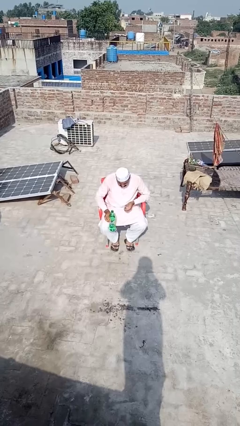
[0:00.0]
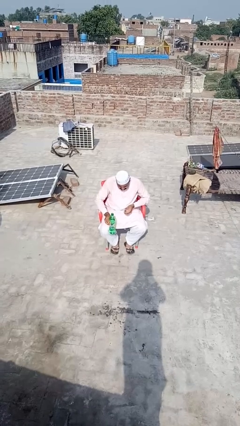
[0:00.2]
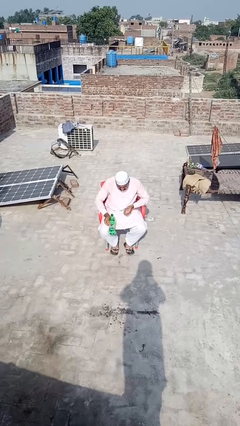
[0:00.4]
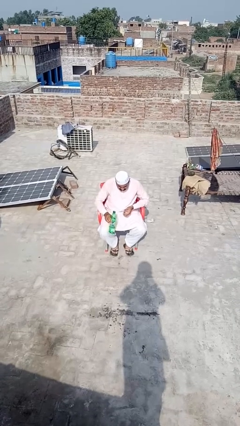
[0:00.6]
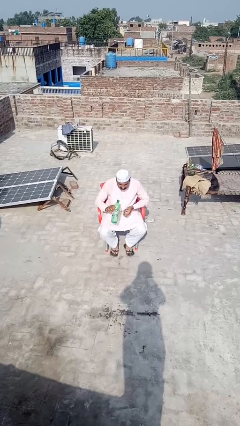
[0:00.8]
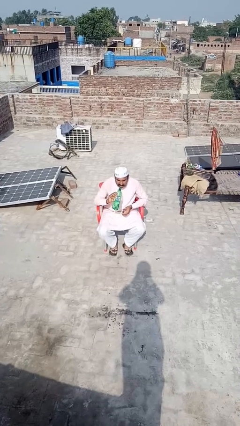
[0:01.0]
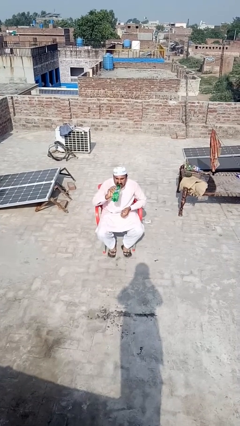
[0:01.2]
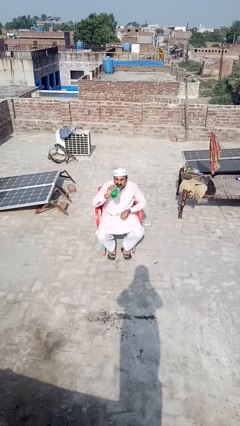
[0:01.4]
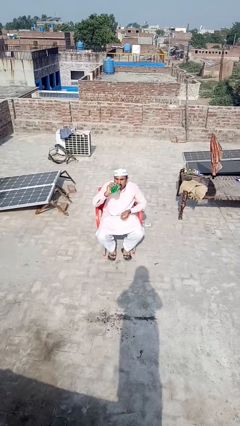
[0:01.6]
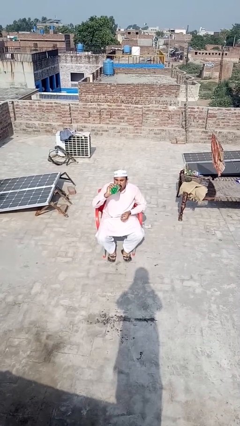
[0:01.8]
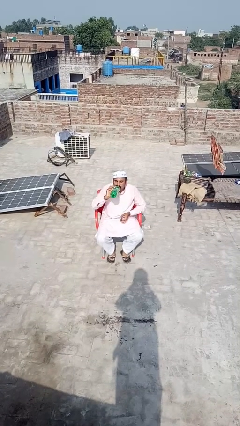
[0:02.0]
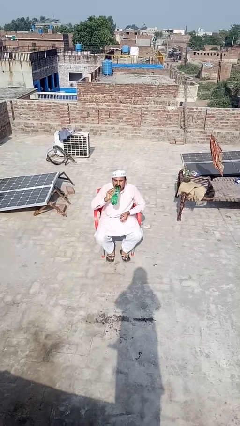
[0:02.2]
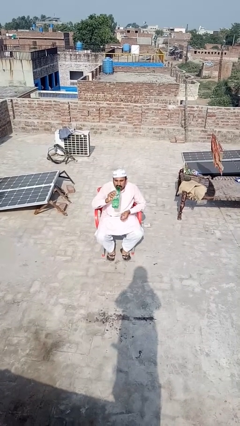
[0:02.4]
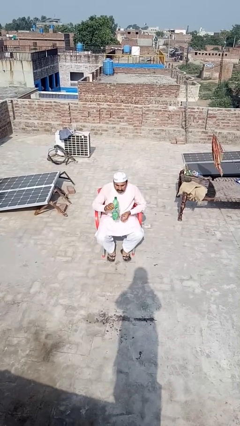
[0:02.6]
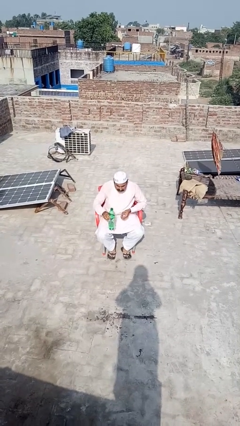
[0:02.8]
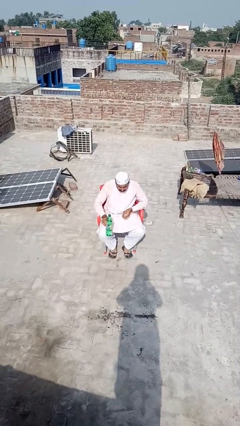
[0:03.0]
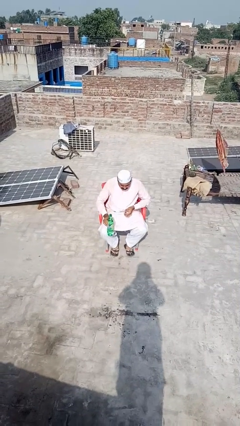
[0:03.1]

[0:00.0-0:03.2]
person drinks from bottle

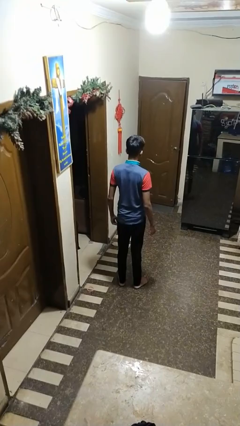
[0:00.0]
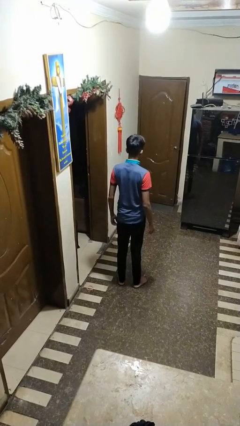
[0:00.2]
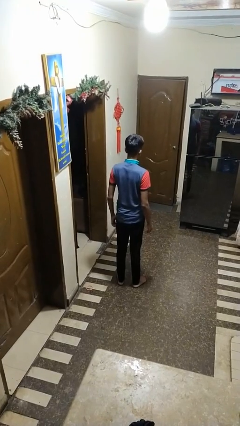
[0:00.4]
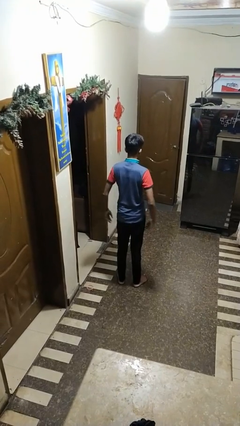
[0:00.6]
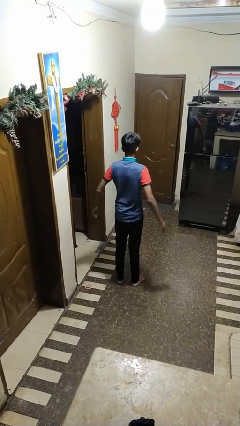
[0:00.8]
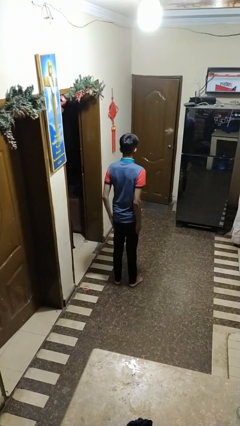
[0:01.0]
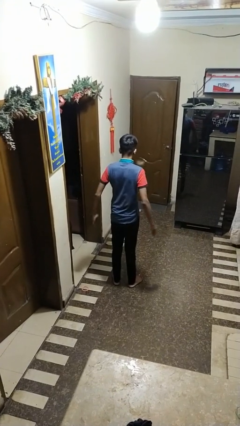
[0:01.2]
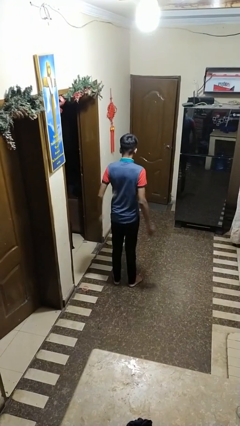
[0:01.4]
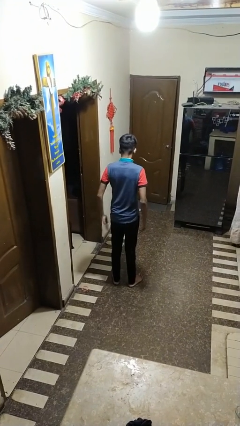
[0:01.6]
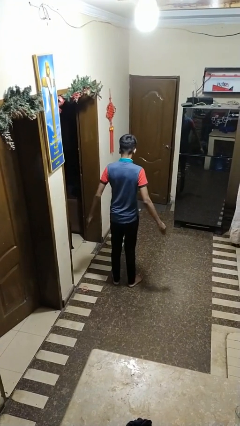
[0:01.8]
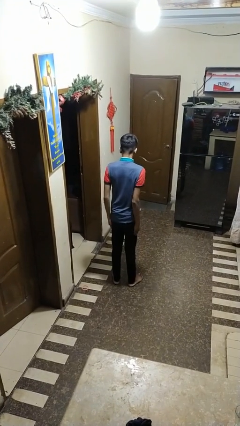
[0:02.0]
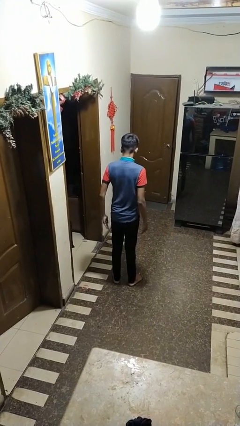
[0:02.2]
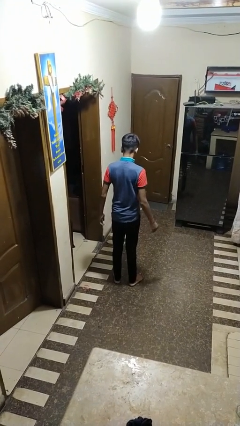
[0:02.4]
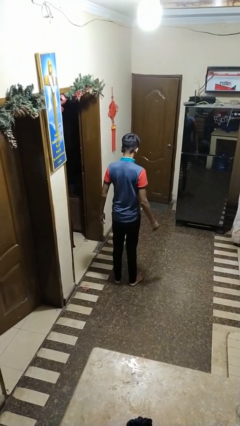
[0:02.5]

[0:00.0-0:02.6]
person slaps hands on thighs

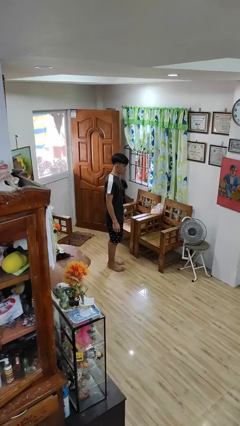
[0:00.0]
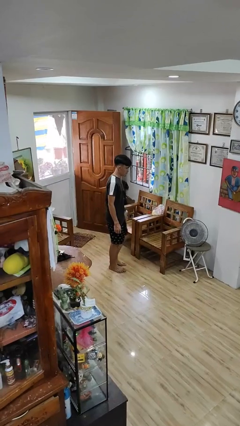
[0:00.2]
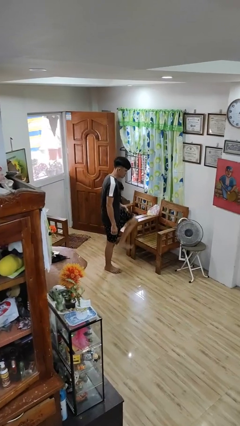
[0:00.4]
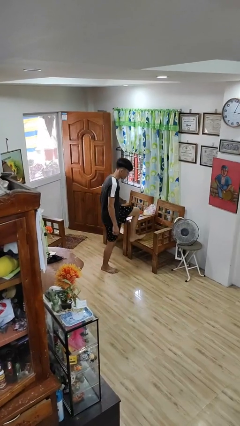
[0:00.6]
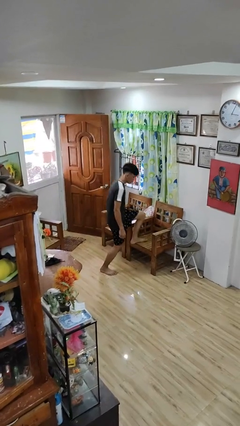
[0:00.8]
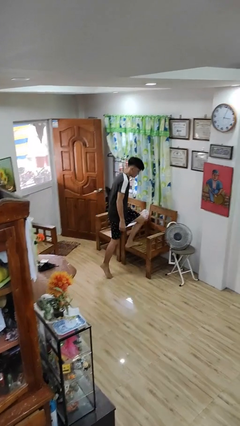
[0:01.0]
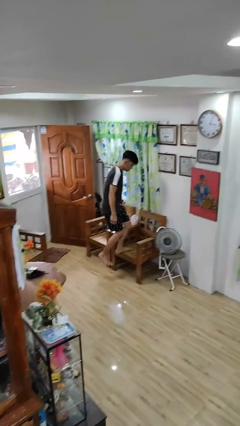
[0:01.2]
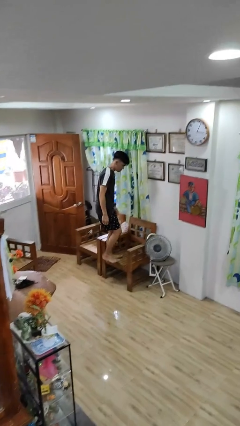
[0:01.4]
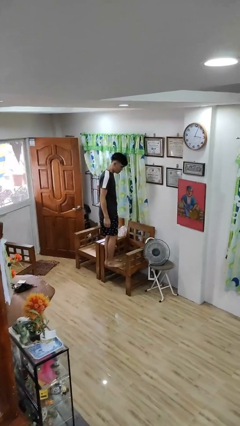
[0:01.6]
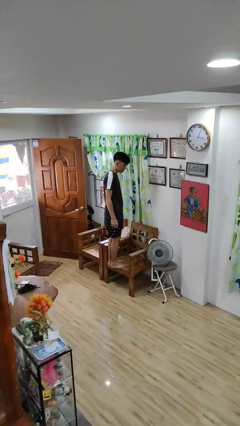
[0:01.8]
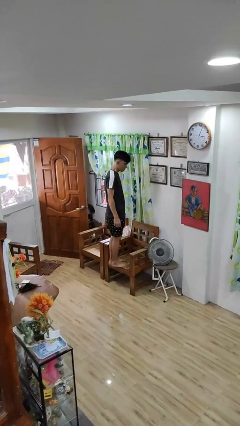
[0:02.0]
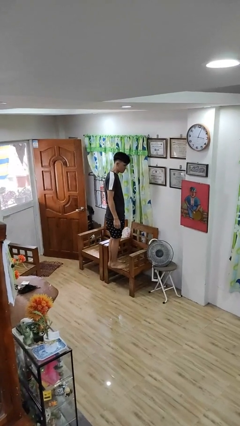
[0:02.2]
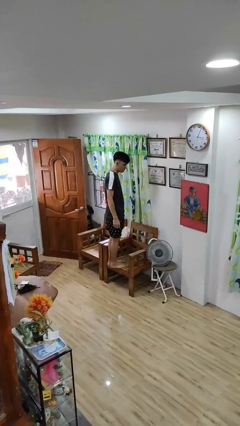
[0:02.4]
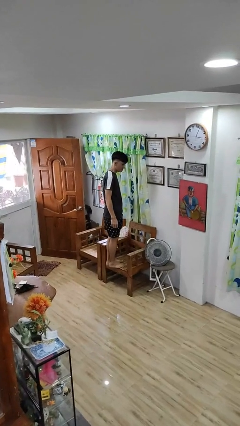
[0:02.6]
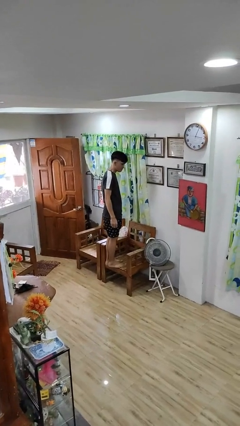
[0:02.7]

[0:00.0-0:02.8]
person climbs on chair

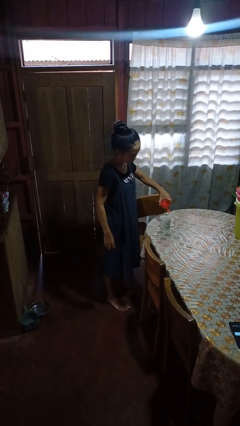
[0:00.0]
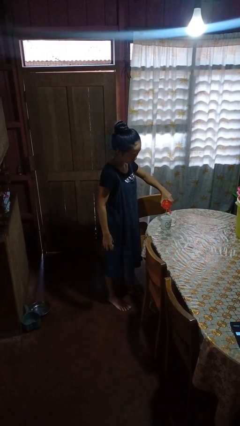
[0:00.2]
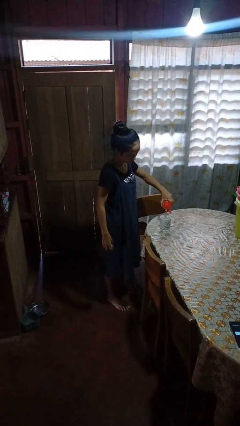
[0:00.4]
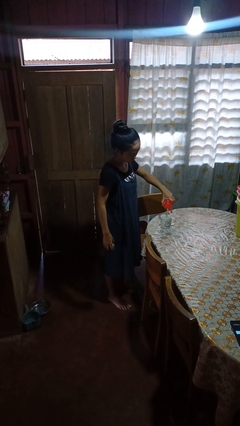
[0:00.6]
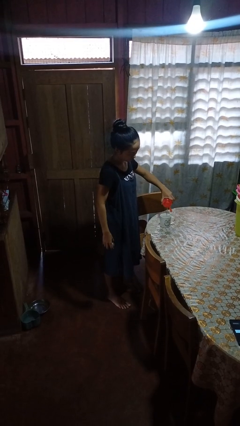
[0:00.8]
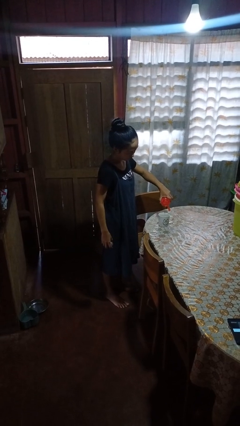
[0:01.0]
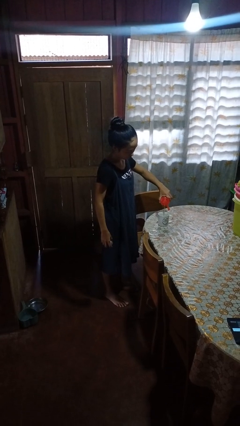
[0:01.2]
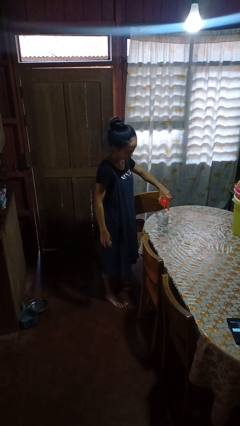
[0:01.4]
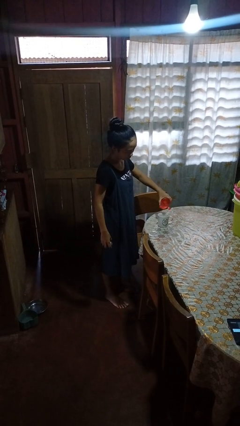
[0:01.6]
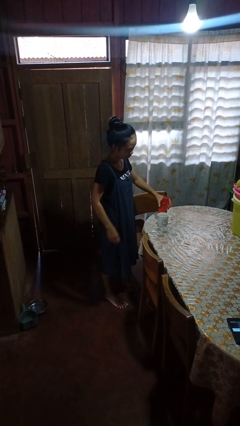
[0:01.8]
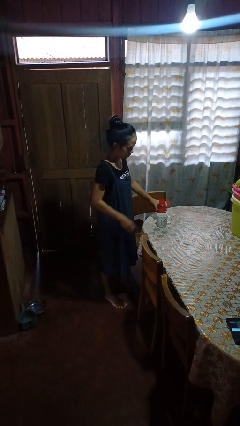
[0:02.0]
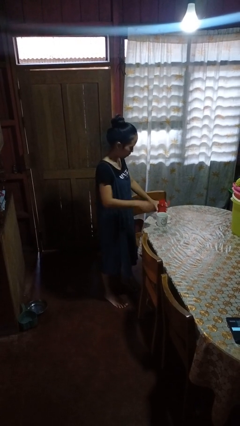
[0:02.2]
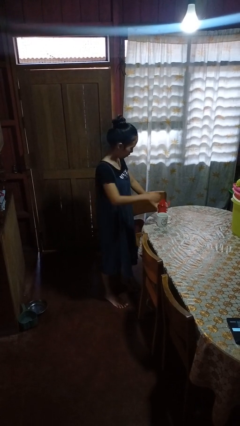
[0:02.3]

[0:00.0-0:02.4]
person pours liquid into cup

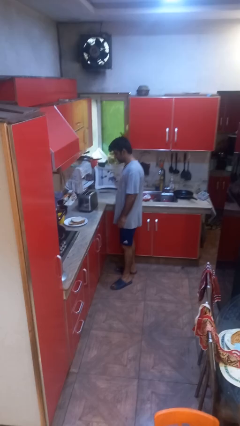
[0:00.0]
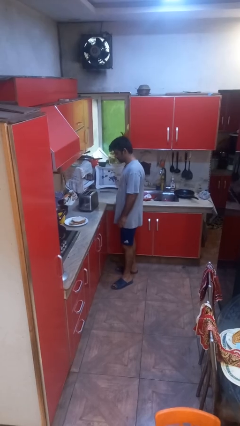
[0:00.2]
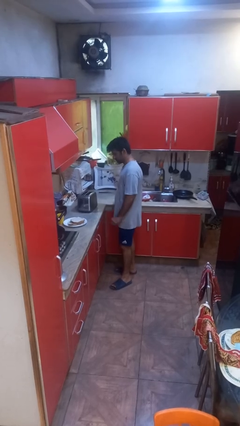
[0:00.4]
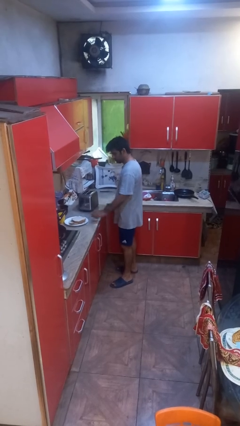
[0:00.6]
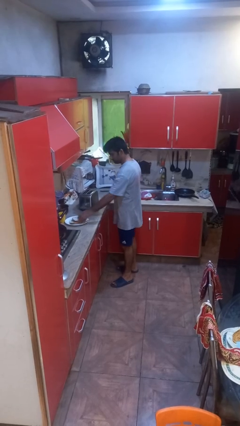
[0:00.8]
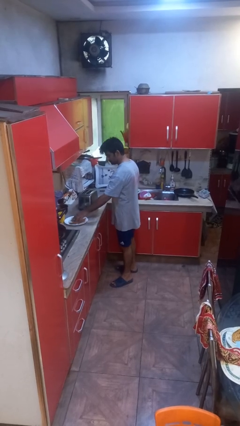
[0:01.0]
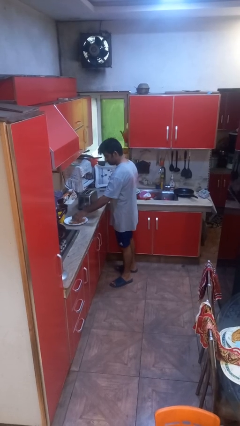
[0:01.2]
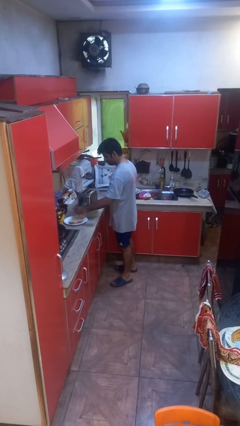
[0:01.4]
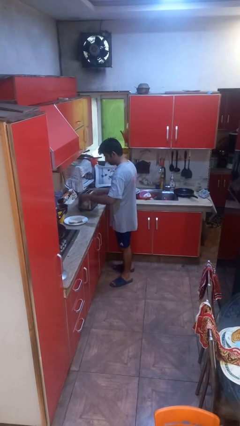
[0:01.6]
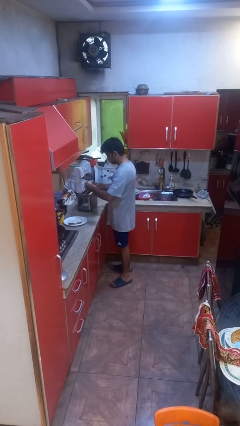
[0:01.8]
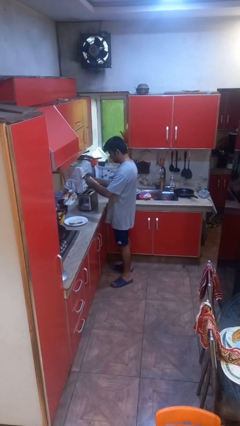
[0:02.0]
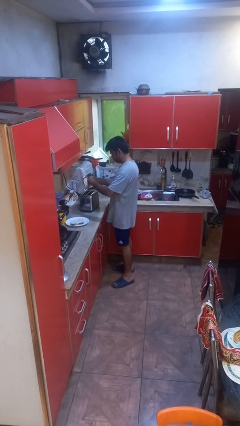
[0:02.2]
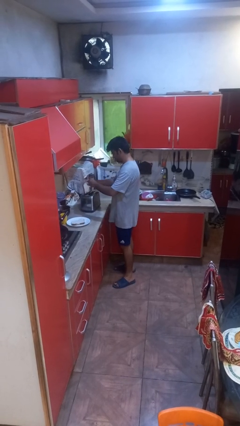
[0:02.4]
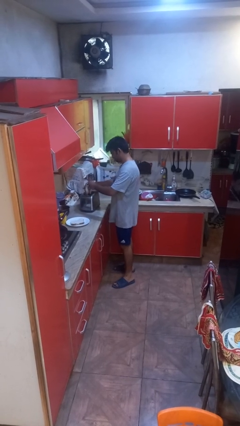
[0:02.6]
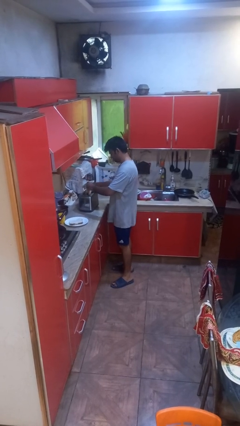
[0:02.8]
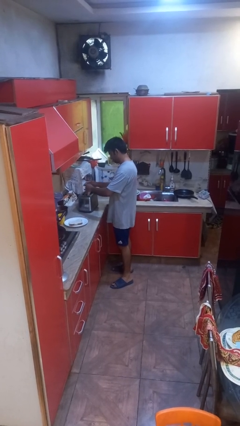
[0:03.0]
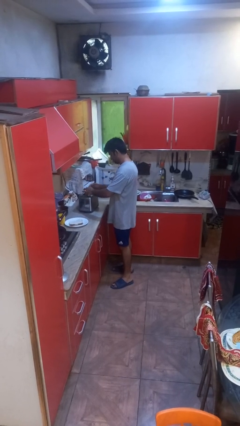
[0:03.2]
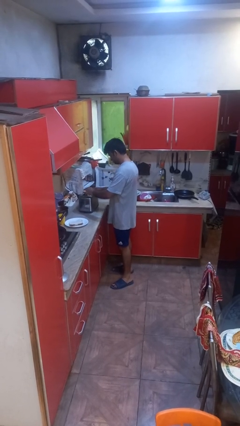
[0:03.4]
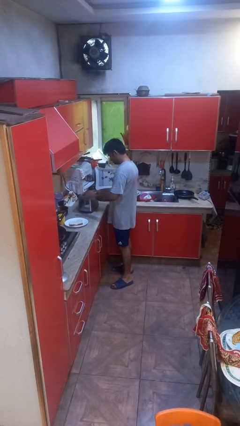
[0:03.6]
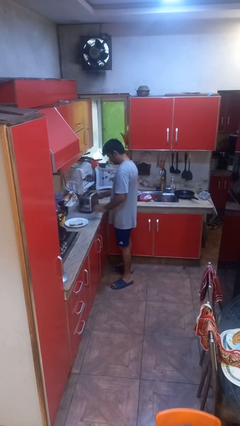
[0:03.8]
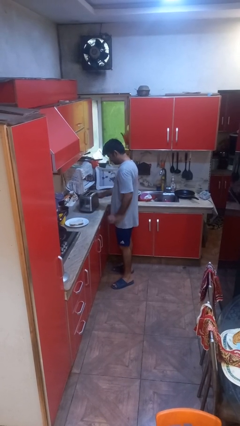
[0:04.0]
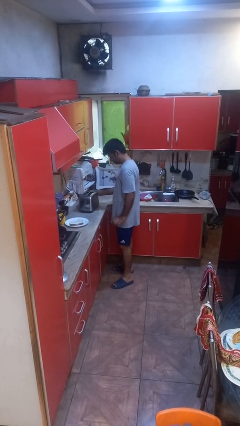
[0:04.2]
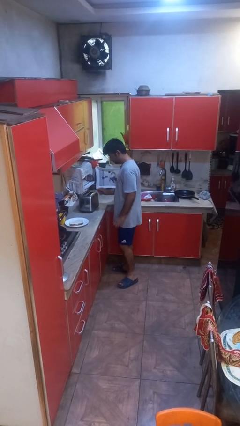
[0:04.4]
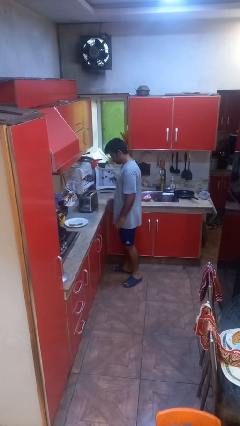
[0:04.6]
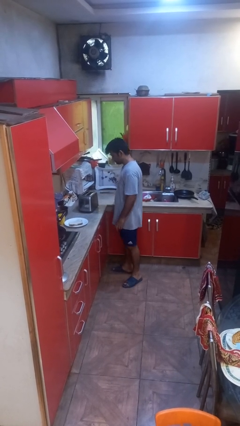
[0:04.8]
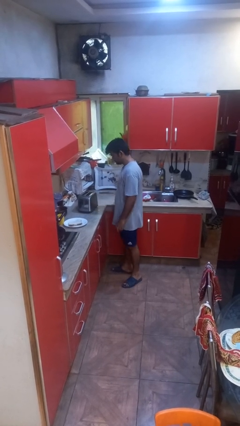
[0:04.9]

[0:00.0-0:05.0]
person puts object into toaster

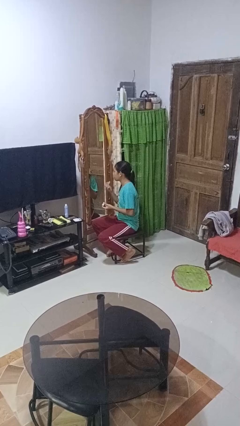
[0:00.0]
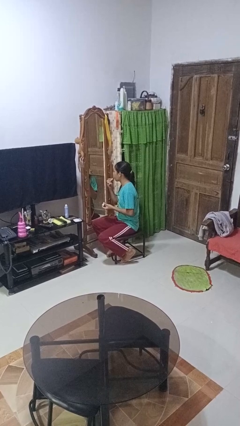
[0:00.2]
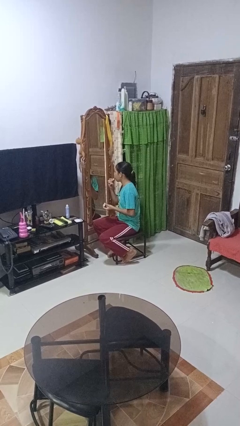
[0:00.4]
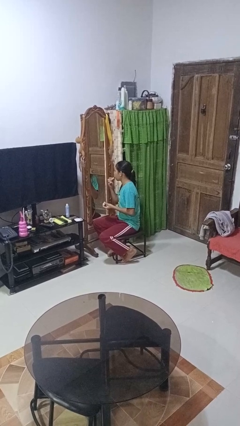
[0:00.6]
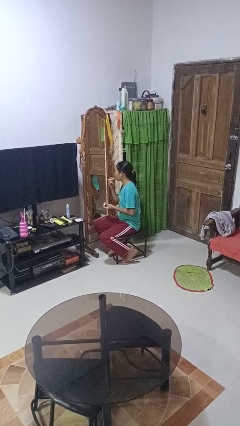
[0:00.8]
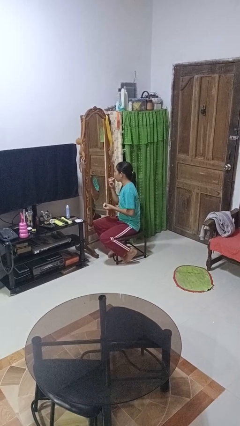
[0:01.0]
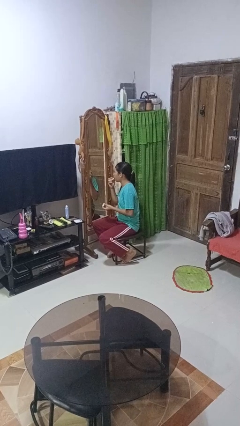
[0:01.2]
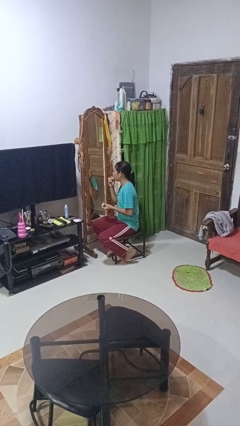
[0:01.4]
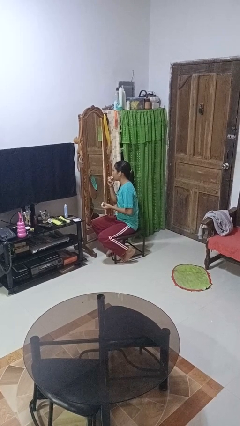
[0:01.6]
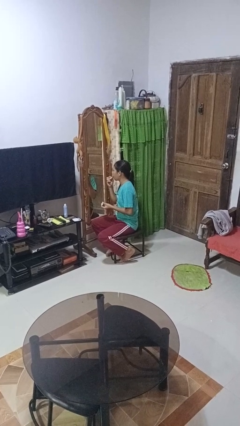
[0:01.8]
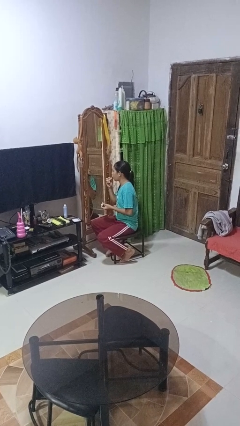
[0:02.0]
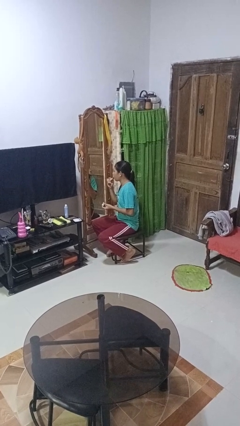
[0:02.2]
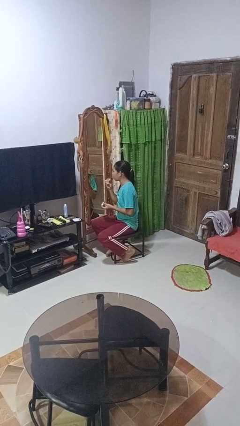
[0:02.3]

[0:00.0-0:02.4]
person applies lip makeup
